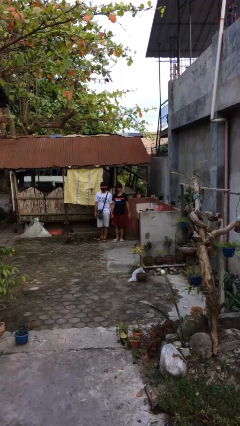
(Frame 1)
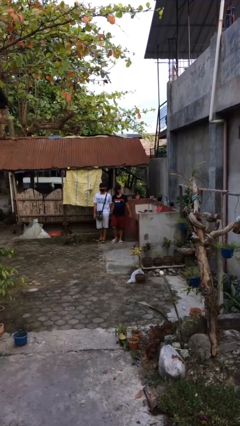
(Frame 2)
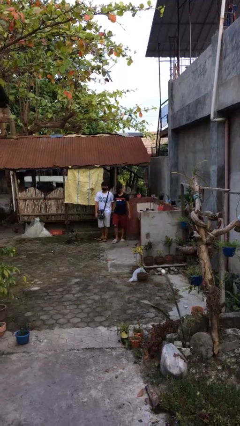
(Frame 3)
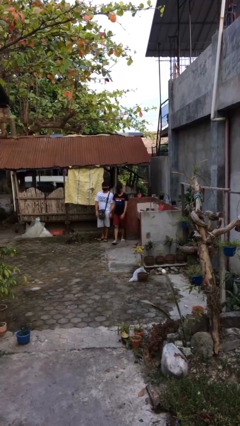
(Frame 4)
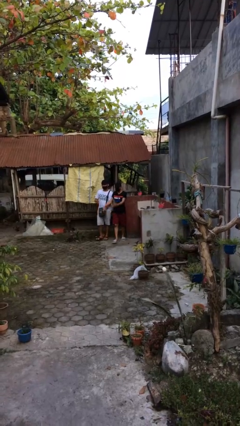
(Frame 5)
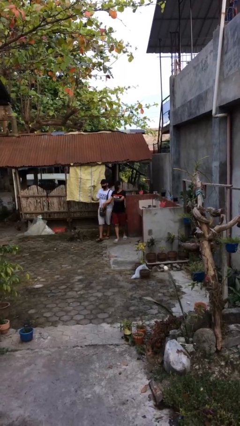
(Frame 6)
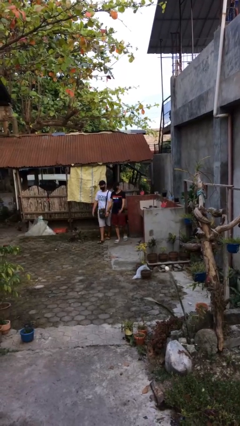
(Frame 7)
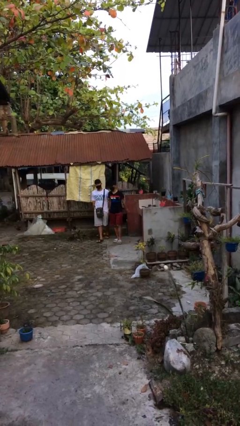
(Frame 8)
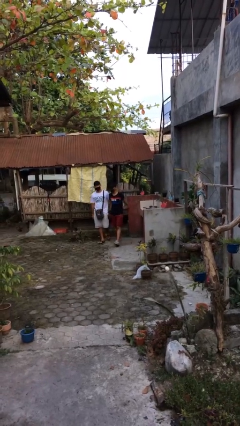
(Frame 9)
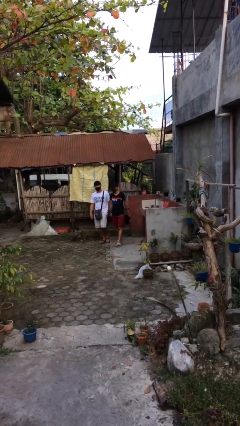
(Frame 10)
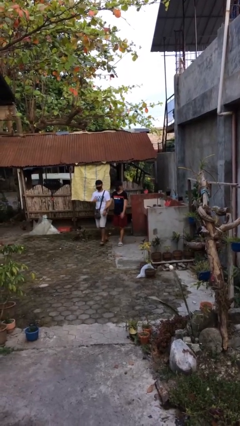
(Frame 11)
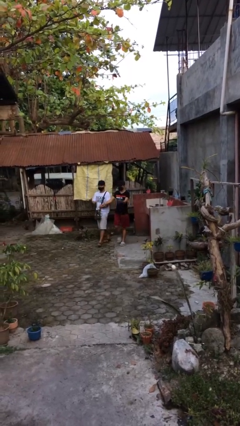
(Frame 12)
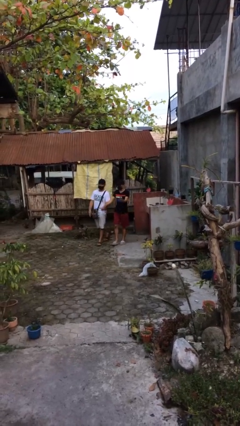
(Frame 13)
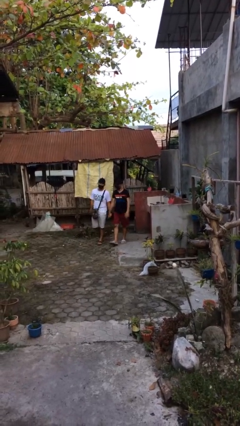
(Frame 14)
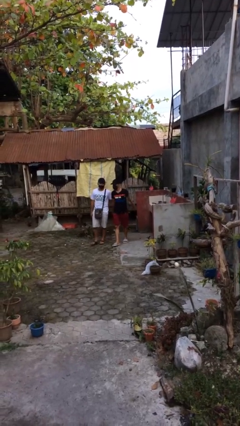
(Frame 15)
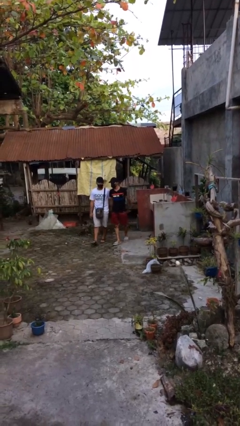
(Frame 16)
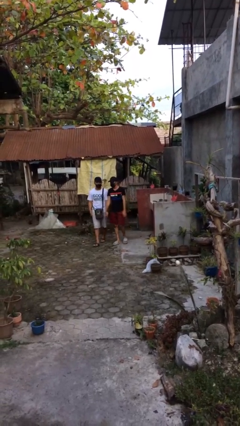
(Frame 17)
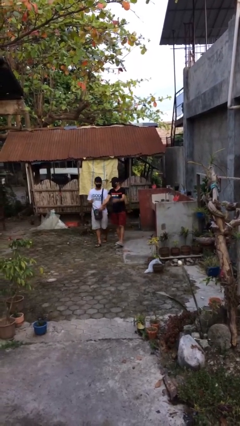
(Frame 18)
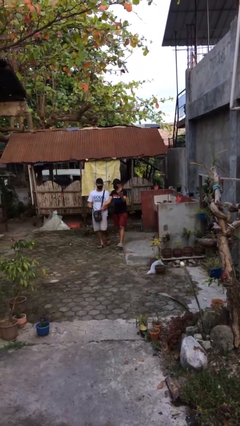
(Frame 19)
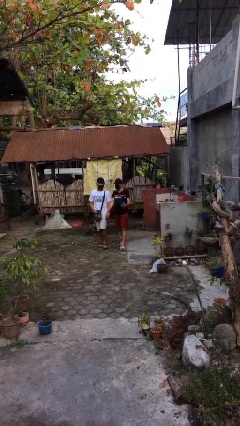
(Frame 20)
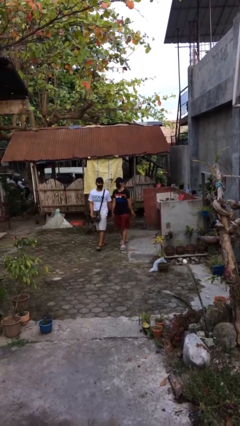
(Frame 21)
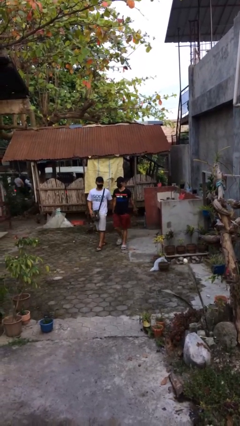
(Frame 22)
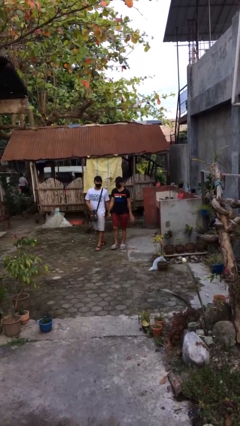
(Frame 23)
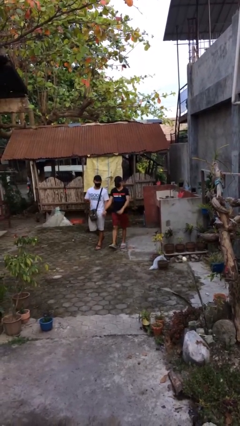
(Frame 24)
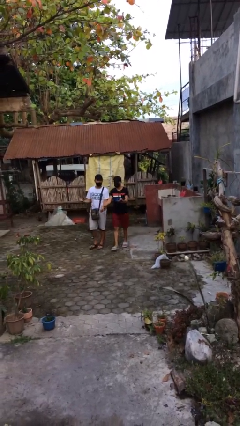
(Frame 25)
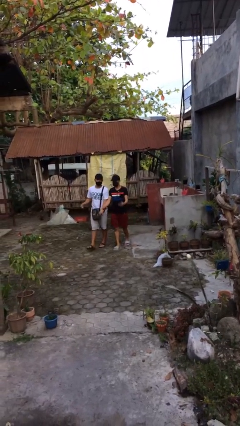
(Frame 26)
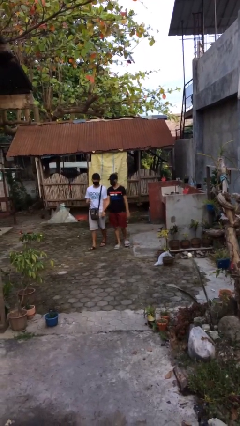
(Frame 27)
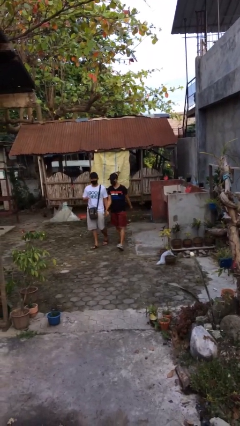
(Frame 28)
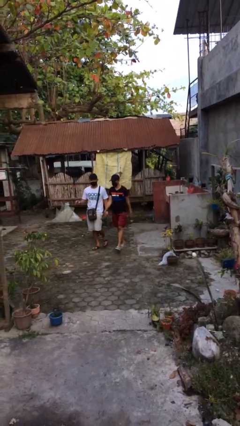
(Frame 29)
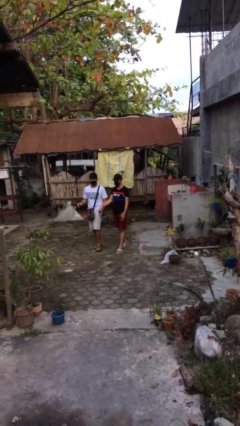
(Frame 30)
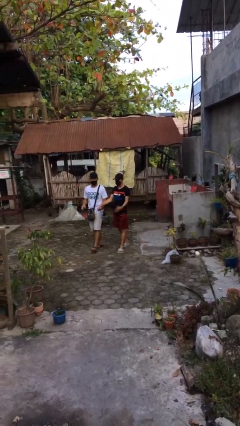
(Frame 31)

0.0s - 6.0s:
person holds hand

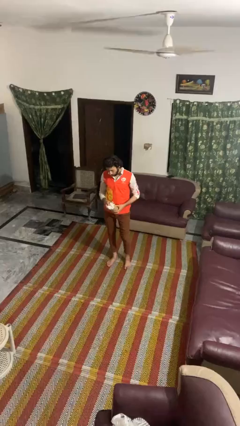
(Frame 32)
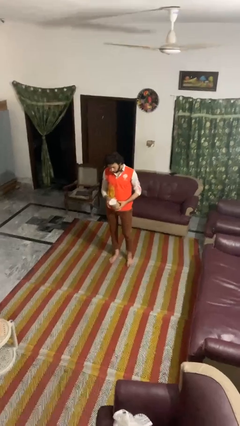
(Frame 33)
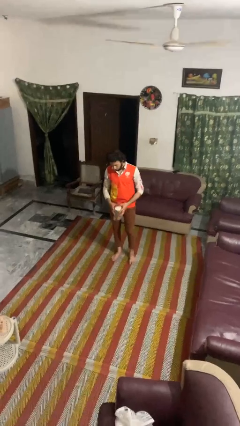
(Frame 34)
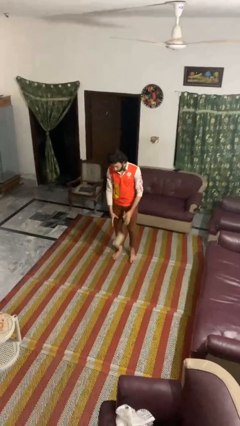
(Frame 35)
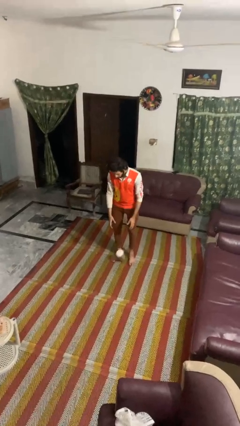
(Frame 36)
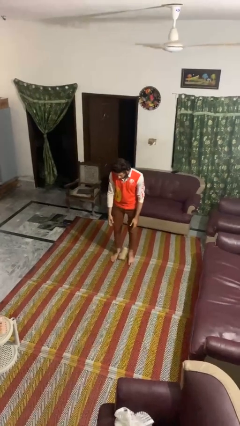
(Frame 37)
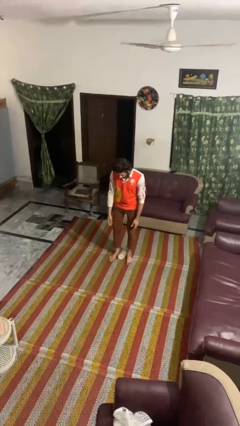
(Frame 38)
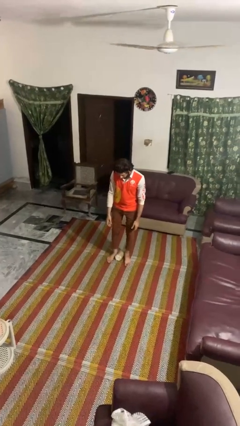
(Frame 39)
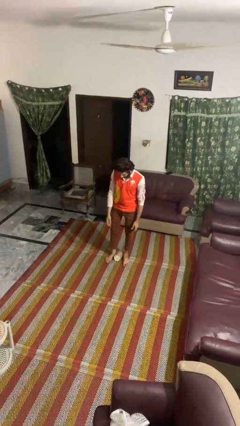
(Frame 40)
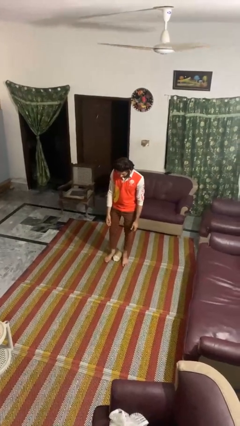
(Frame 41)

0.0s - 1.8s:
person drops object

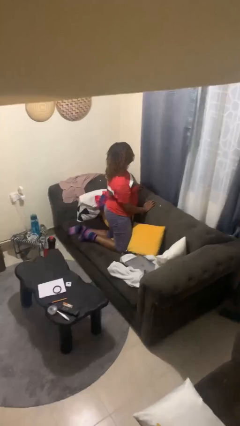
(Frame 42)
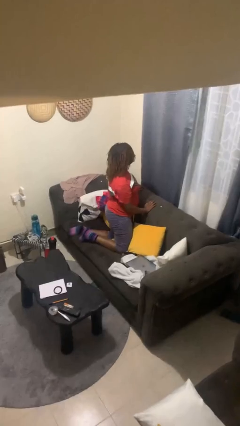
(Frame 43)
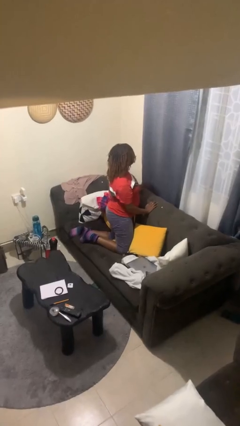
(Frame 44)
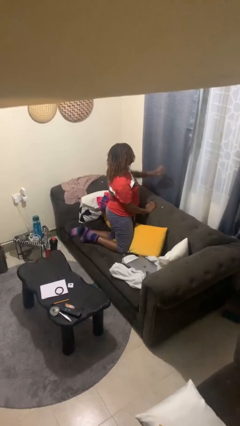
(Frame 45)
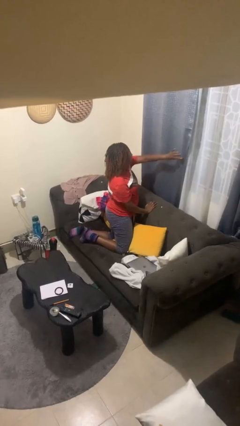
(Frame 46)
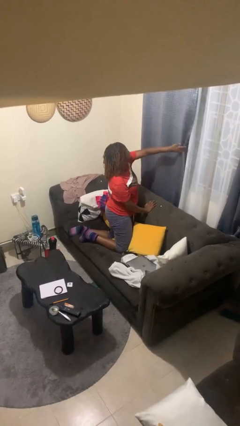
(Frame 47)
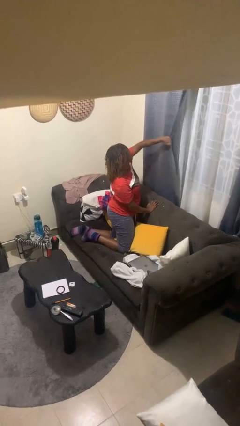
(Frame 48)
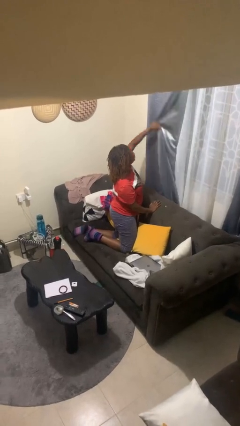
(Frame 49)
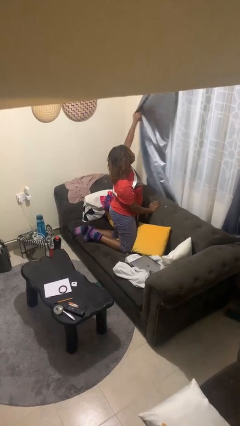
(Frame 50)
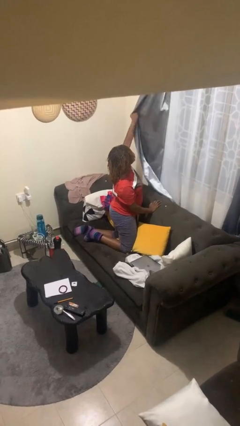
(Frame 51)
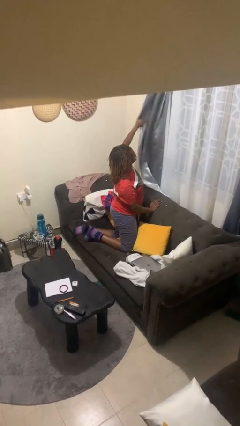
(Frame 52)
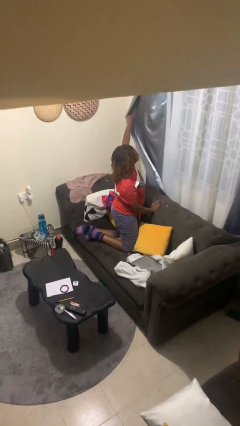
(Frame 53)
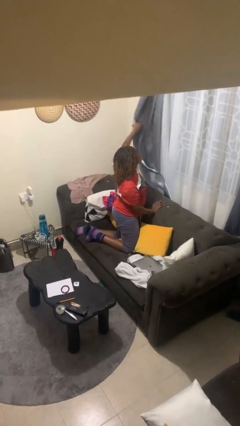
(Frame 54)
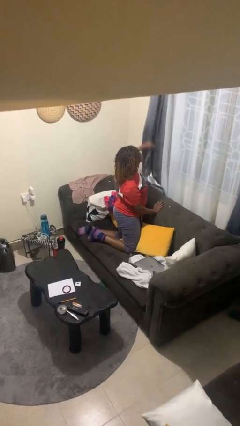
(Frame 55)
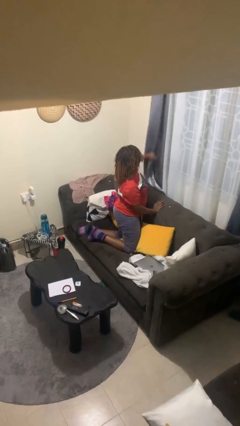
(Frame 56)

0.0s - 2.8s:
person opens curtains

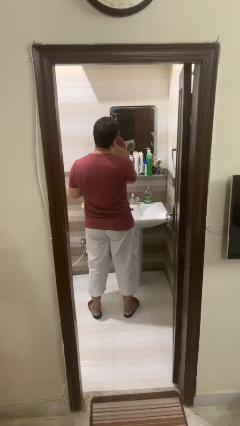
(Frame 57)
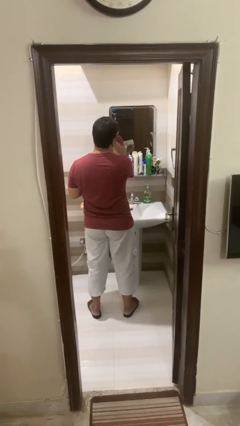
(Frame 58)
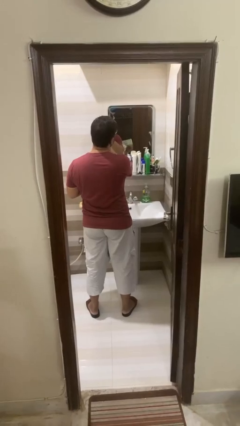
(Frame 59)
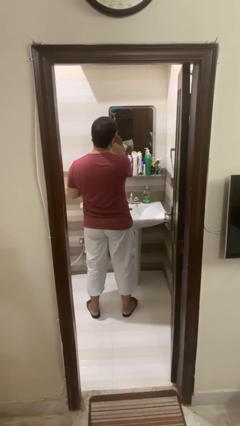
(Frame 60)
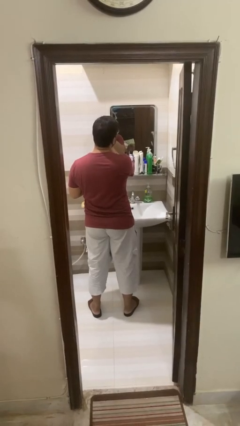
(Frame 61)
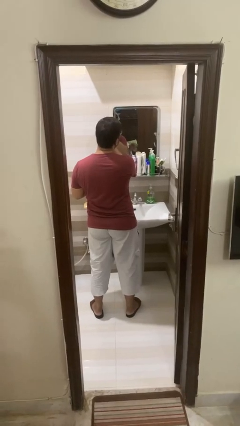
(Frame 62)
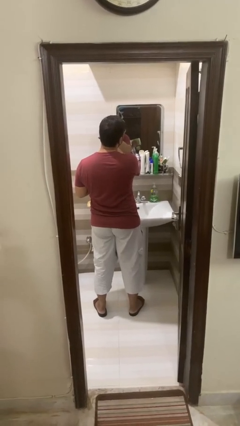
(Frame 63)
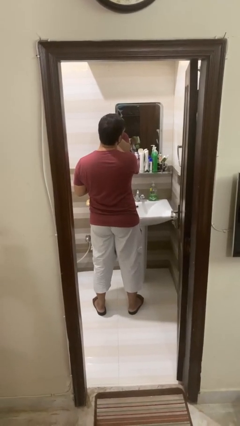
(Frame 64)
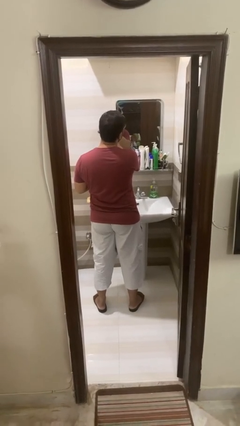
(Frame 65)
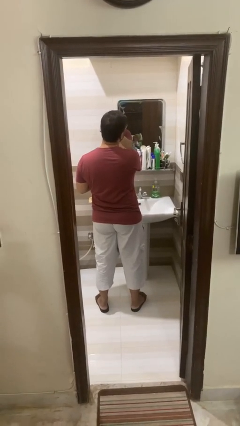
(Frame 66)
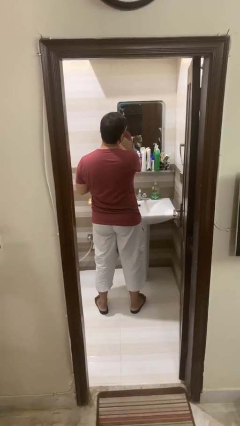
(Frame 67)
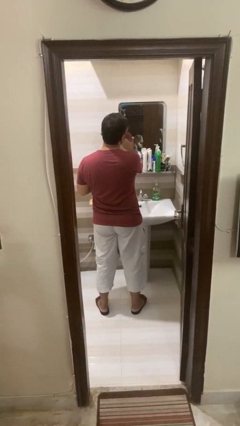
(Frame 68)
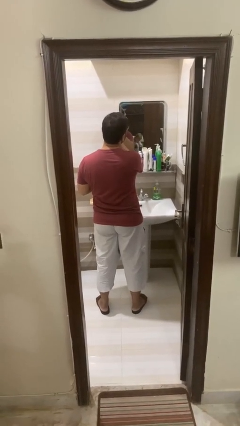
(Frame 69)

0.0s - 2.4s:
person shaves face

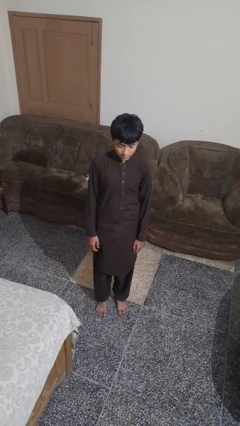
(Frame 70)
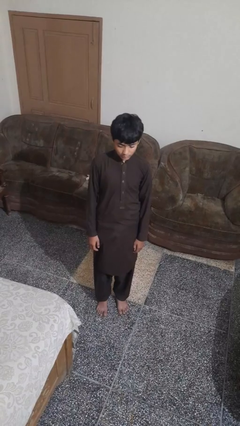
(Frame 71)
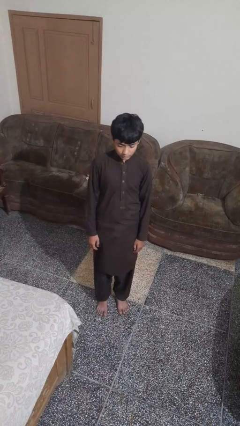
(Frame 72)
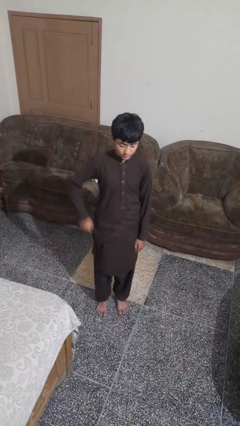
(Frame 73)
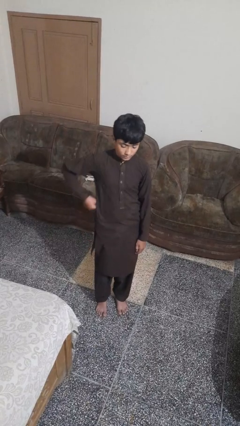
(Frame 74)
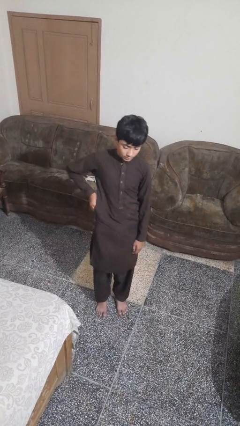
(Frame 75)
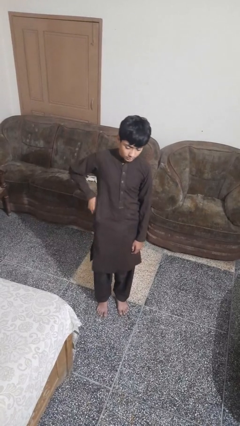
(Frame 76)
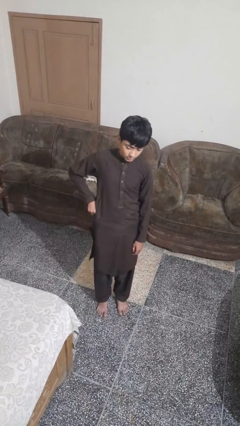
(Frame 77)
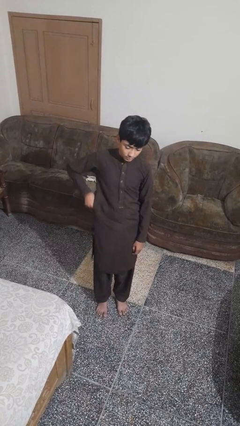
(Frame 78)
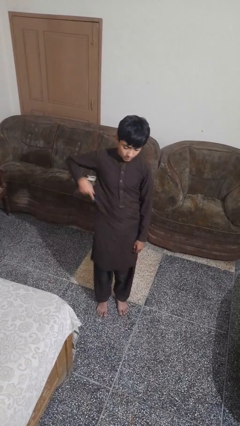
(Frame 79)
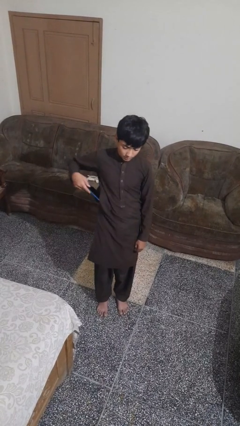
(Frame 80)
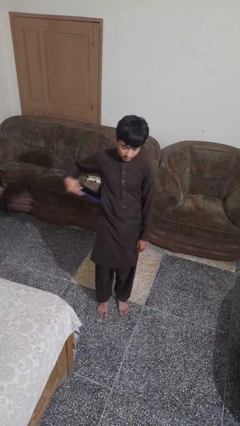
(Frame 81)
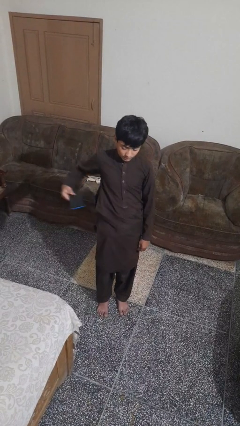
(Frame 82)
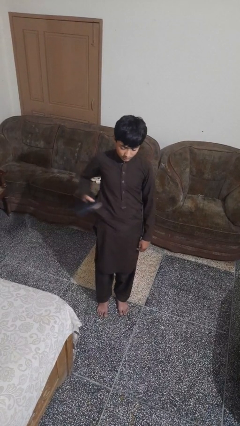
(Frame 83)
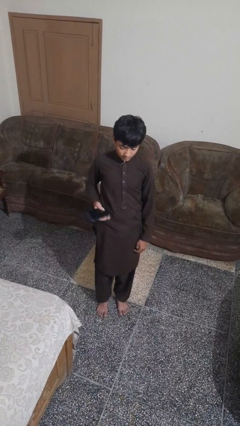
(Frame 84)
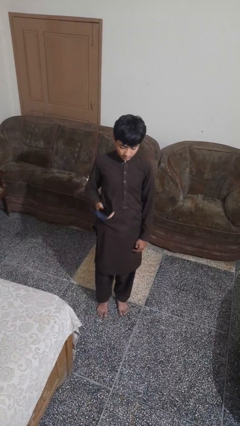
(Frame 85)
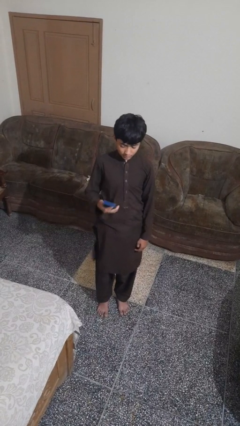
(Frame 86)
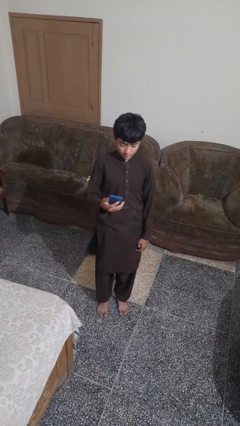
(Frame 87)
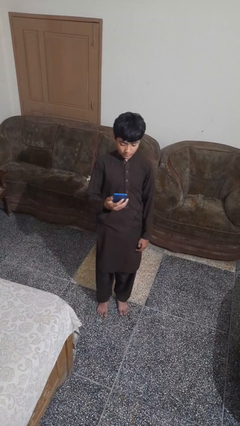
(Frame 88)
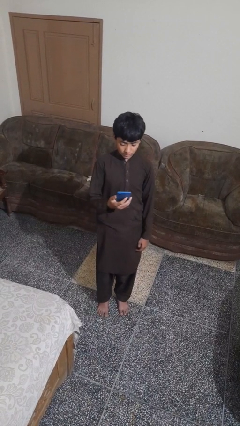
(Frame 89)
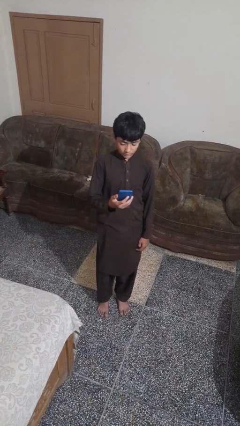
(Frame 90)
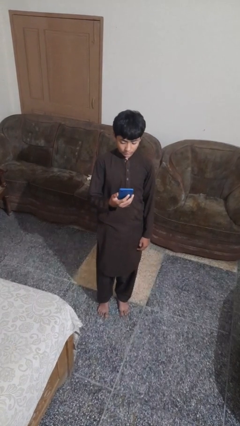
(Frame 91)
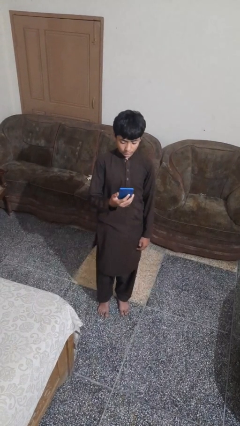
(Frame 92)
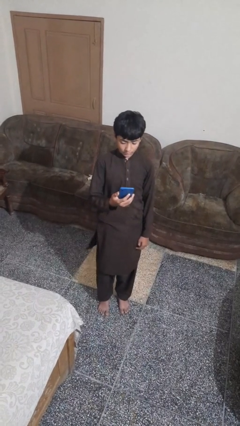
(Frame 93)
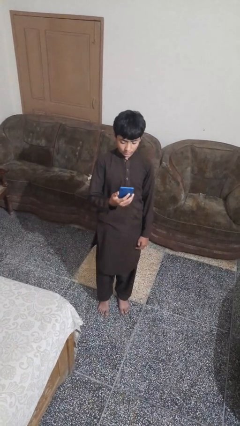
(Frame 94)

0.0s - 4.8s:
person takes phone from pocket
